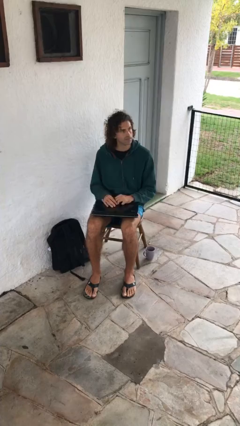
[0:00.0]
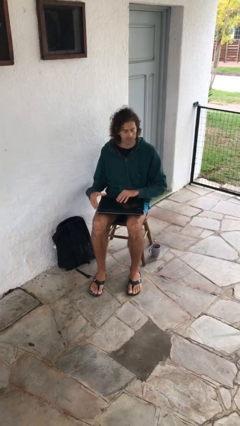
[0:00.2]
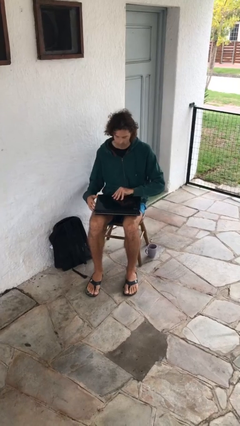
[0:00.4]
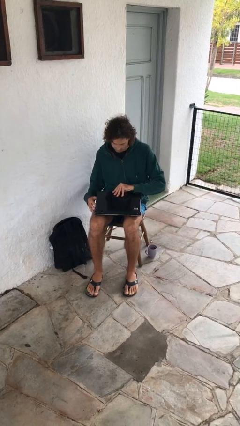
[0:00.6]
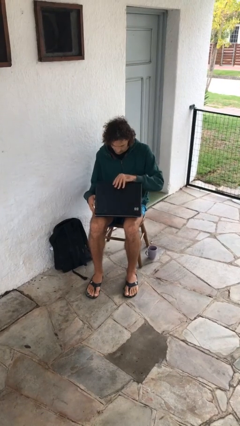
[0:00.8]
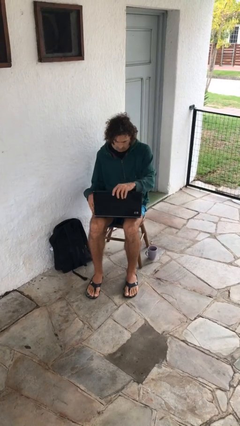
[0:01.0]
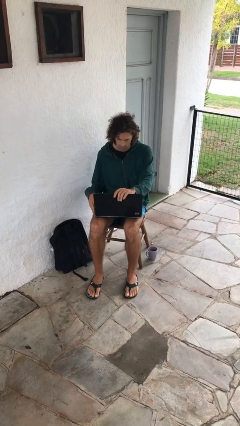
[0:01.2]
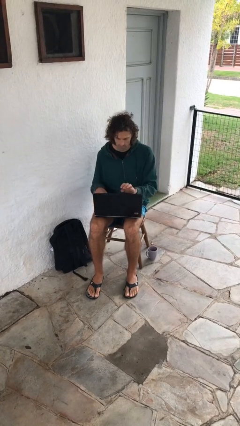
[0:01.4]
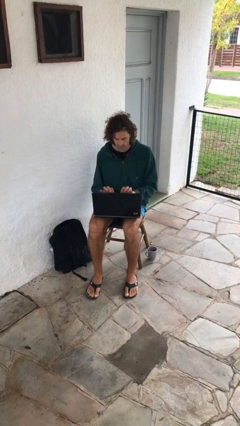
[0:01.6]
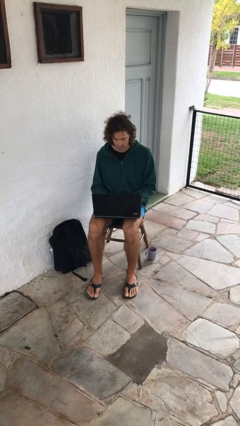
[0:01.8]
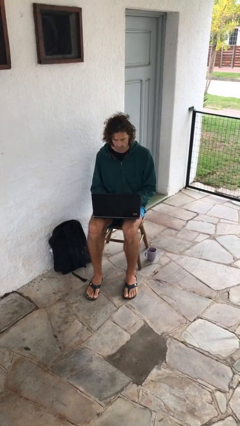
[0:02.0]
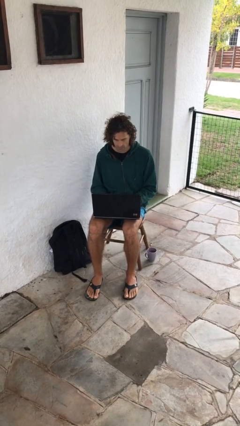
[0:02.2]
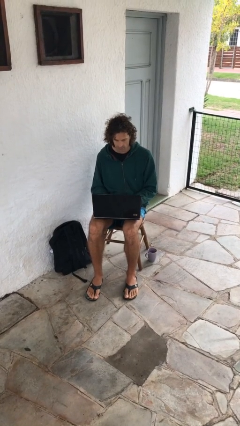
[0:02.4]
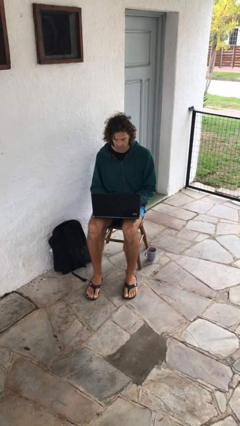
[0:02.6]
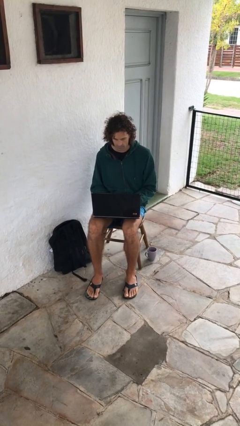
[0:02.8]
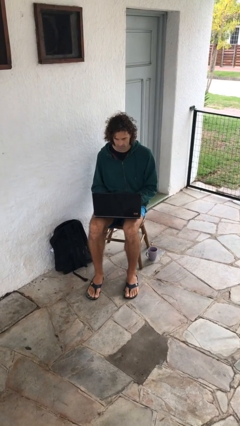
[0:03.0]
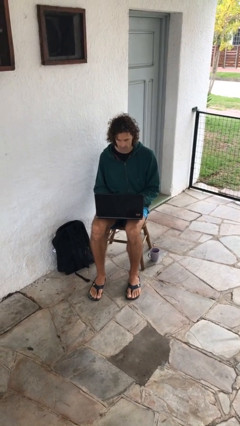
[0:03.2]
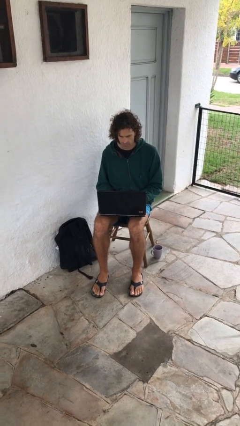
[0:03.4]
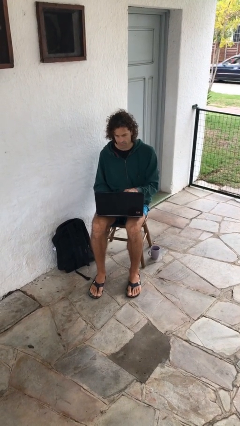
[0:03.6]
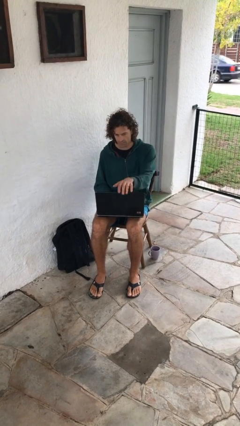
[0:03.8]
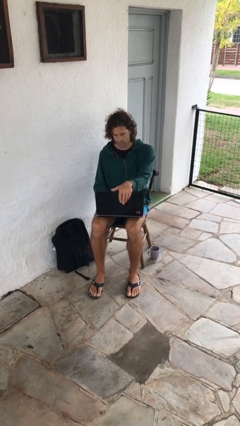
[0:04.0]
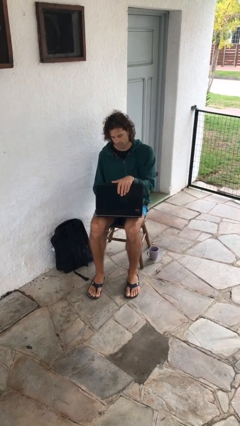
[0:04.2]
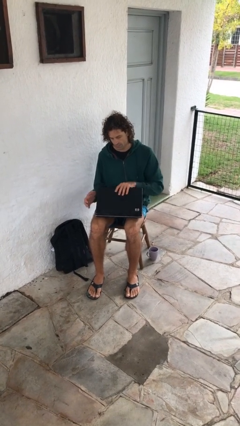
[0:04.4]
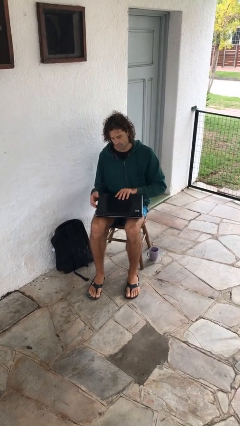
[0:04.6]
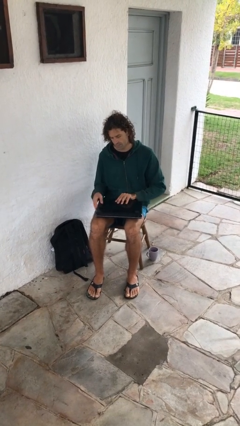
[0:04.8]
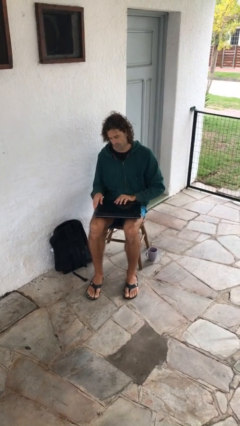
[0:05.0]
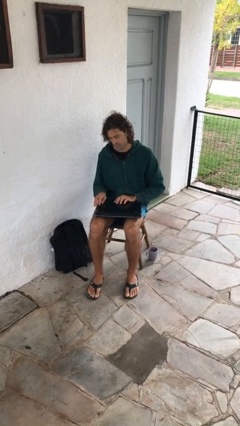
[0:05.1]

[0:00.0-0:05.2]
person interacts with laptop

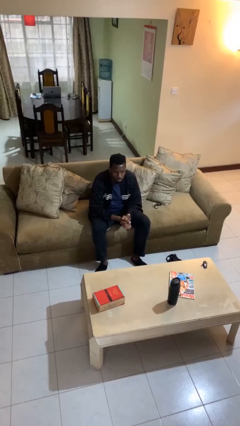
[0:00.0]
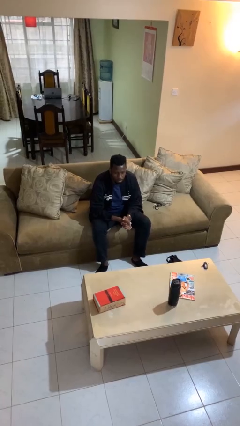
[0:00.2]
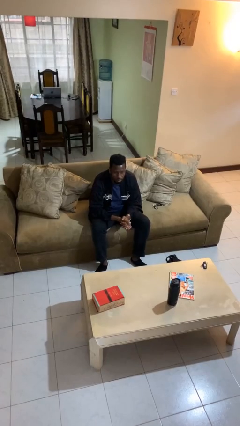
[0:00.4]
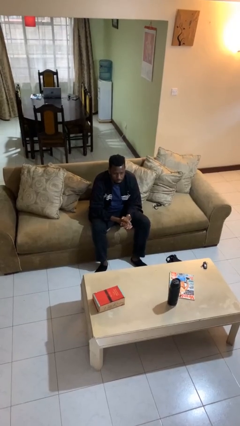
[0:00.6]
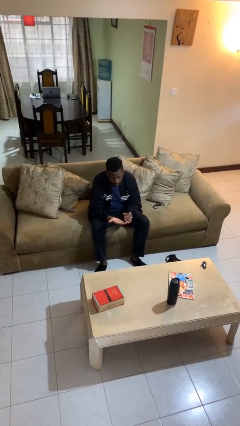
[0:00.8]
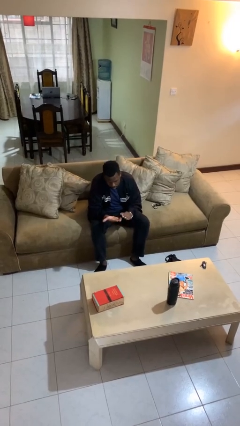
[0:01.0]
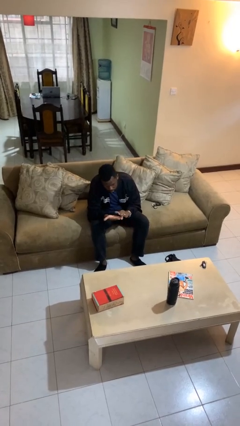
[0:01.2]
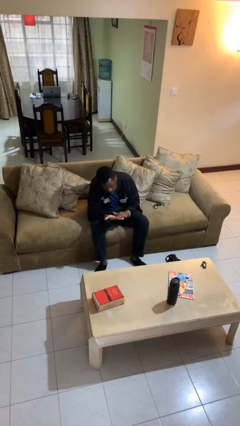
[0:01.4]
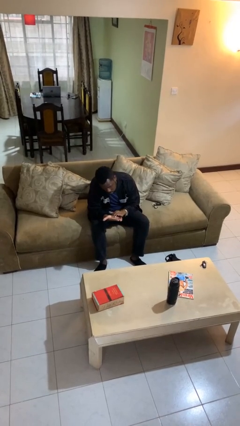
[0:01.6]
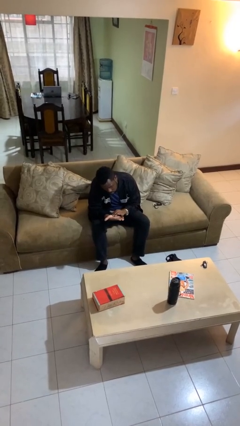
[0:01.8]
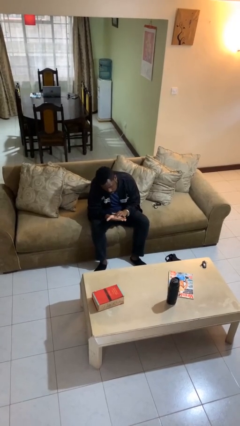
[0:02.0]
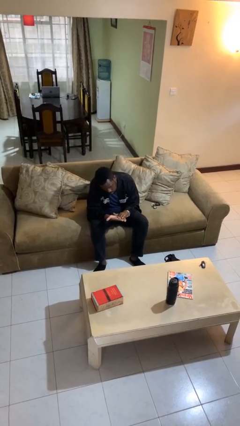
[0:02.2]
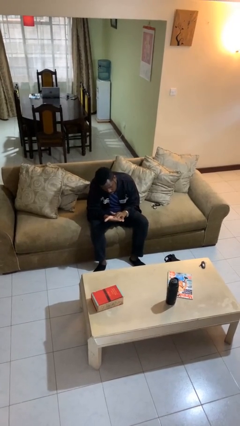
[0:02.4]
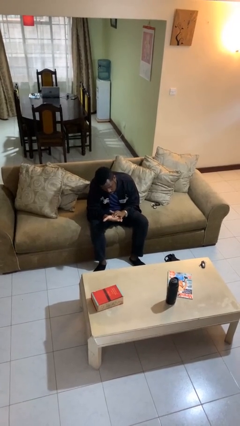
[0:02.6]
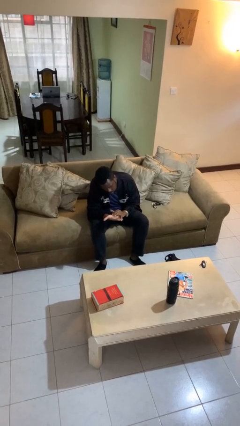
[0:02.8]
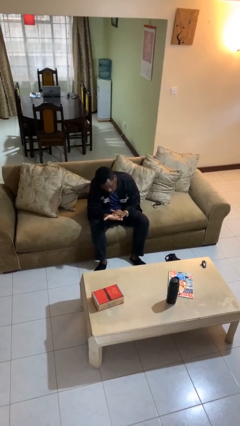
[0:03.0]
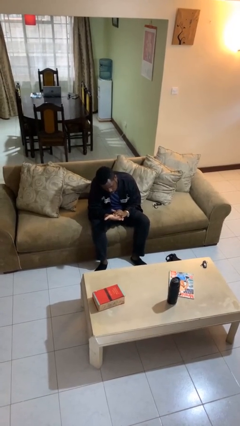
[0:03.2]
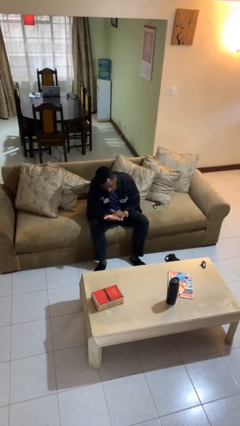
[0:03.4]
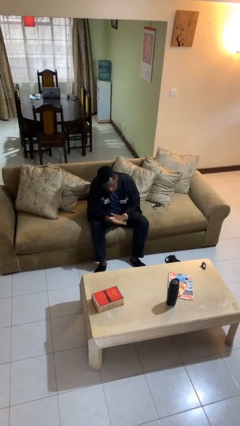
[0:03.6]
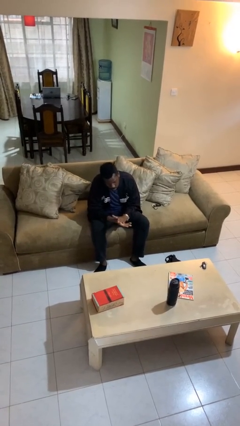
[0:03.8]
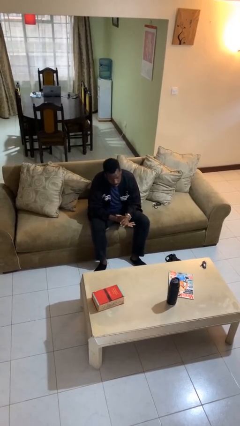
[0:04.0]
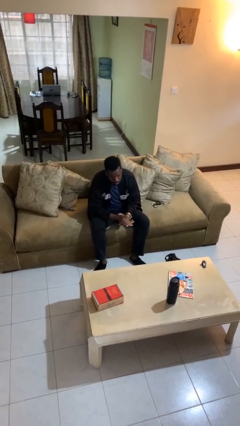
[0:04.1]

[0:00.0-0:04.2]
person looks at hands in lap

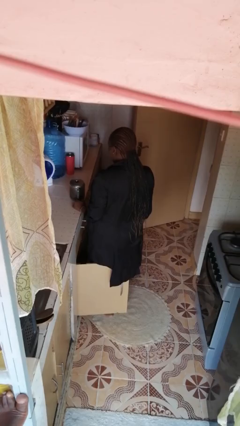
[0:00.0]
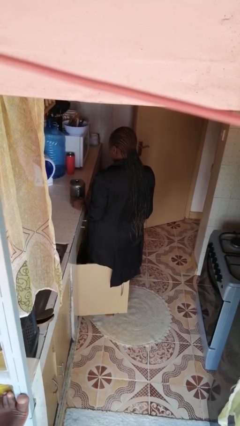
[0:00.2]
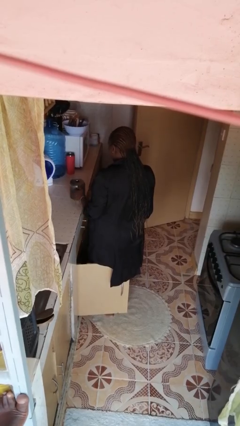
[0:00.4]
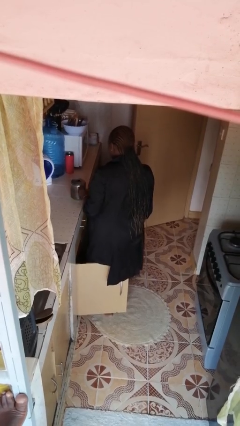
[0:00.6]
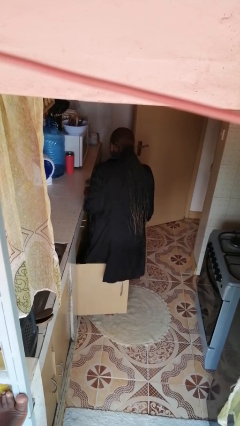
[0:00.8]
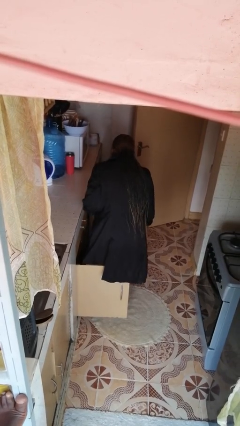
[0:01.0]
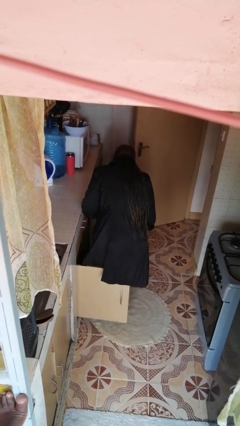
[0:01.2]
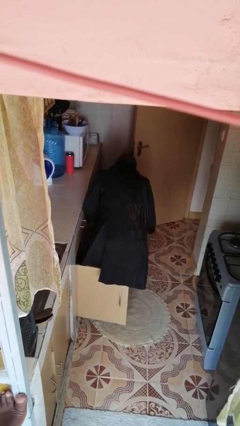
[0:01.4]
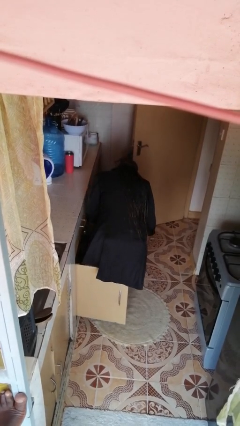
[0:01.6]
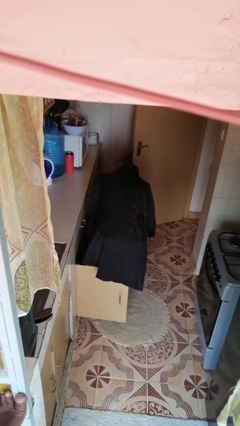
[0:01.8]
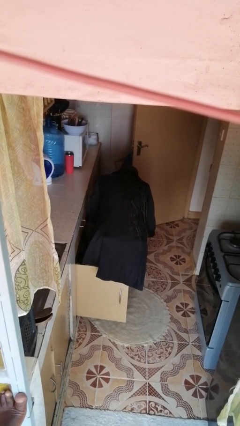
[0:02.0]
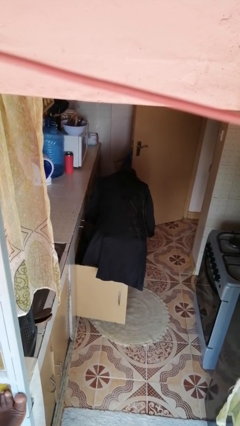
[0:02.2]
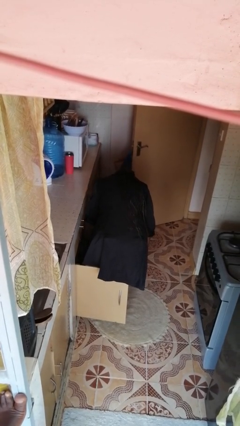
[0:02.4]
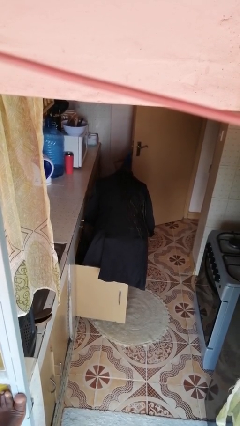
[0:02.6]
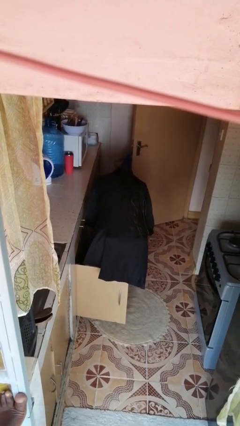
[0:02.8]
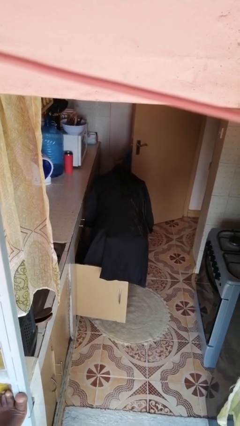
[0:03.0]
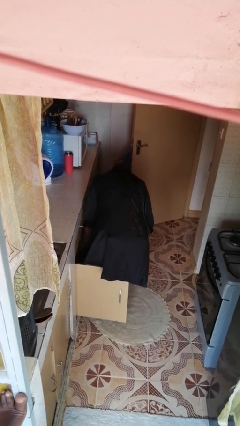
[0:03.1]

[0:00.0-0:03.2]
person puts object in cabinet

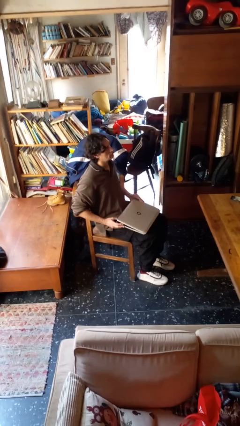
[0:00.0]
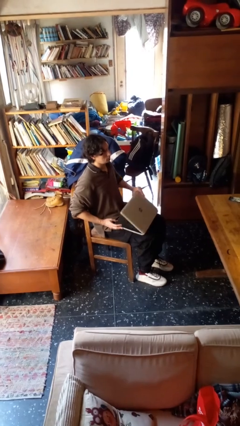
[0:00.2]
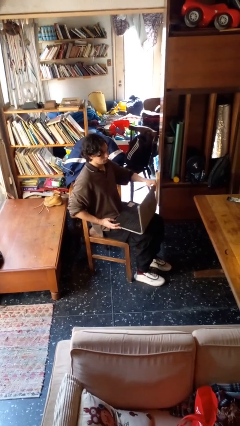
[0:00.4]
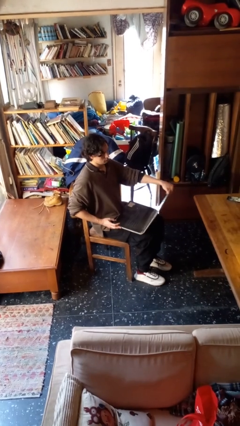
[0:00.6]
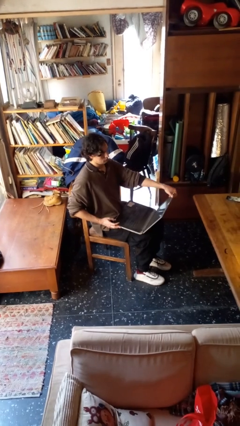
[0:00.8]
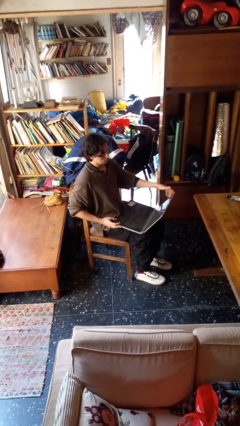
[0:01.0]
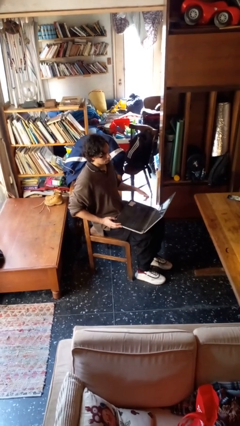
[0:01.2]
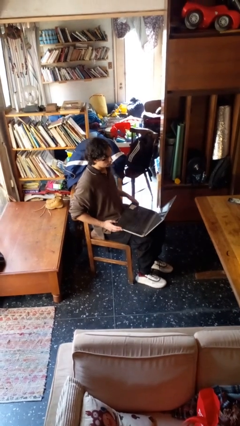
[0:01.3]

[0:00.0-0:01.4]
person opens laptop

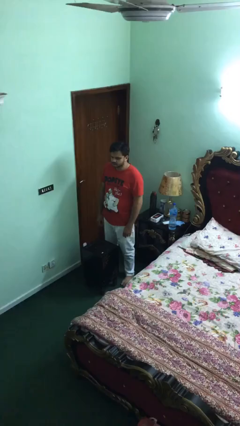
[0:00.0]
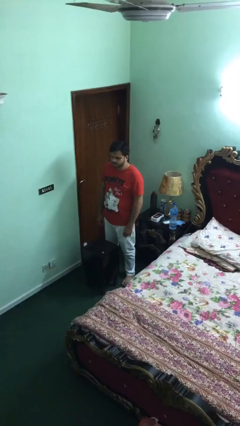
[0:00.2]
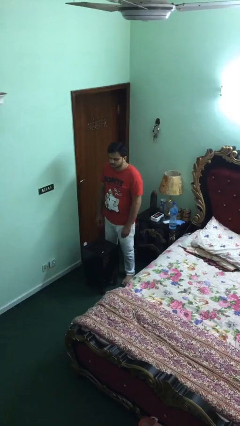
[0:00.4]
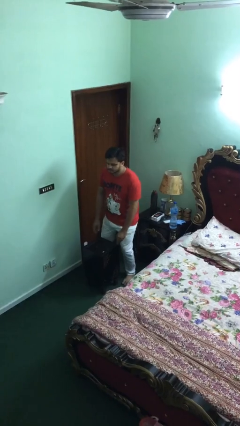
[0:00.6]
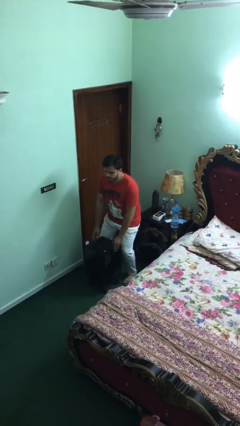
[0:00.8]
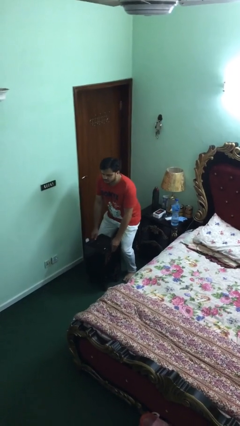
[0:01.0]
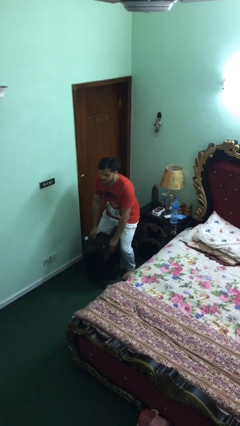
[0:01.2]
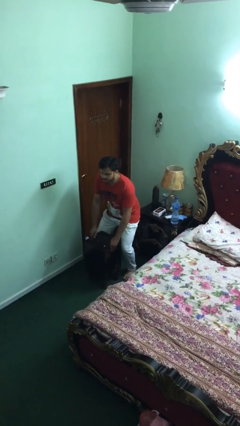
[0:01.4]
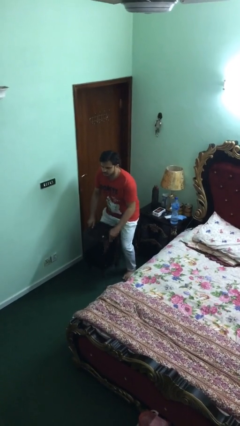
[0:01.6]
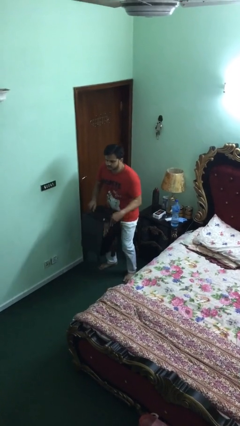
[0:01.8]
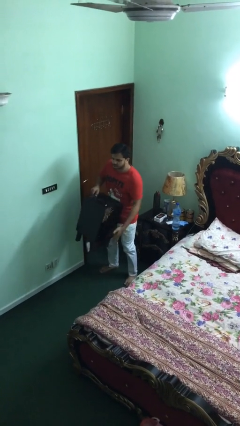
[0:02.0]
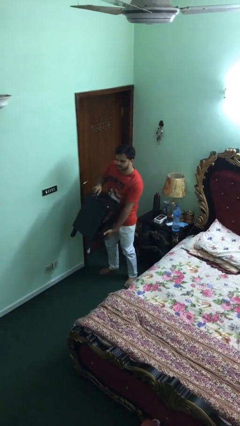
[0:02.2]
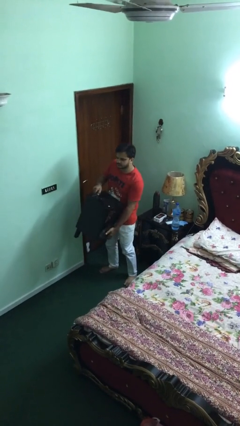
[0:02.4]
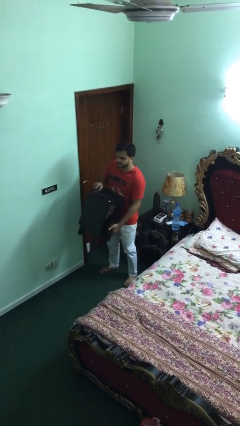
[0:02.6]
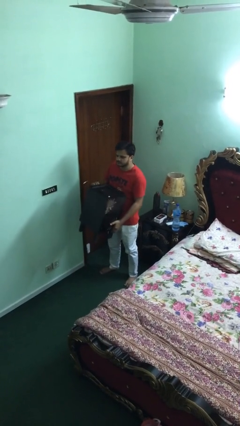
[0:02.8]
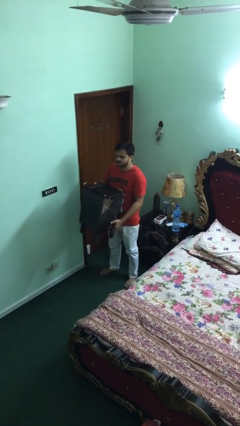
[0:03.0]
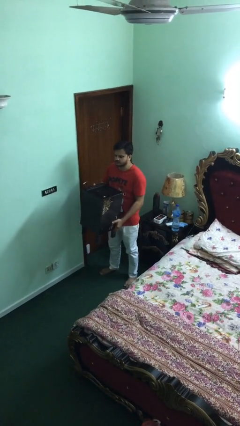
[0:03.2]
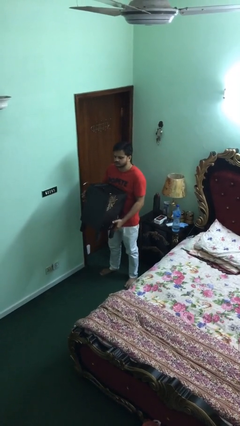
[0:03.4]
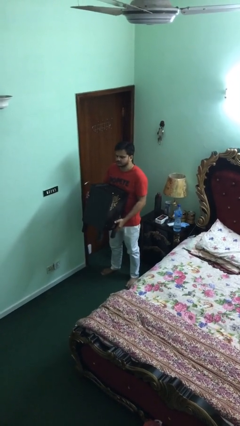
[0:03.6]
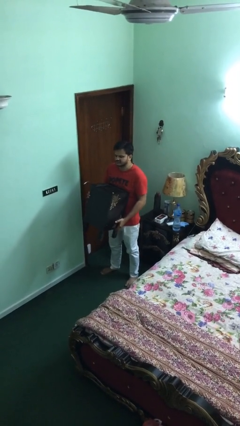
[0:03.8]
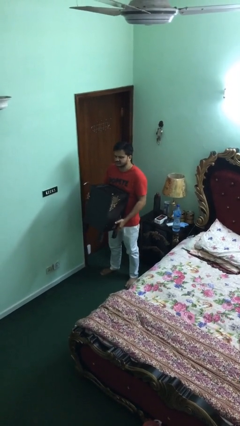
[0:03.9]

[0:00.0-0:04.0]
person picks up object from floor
